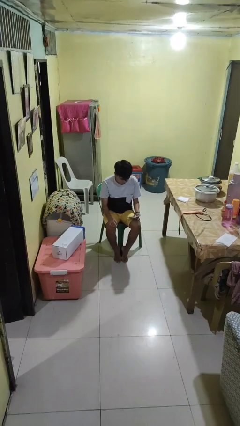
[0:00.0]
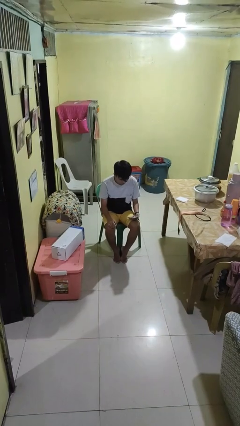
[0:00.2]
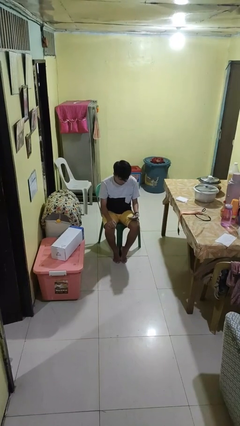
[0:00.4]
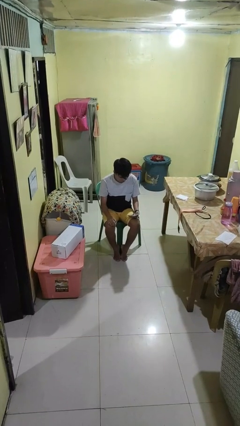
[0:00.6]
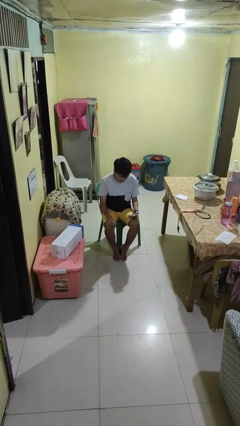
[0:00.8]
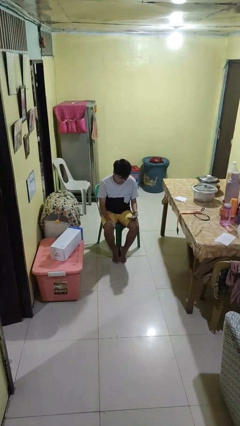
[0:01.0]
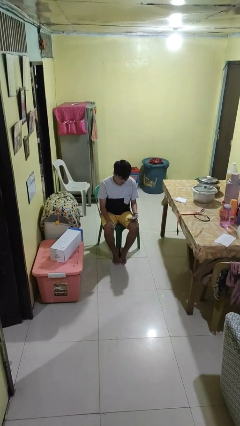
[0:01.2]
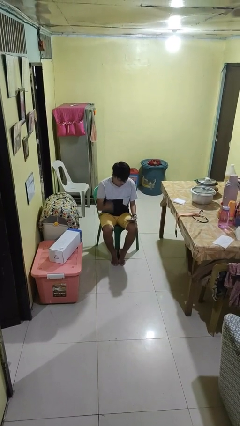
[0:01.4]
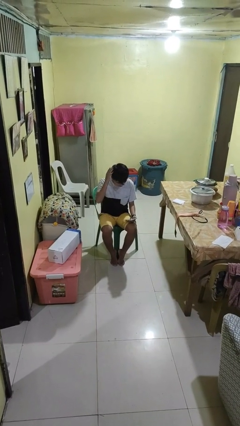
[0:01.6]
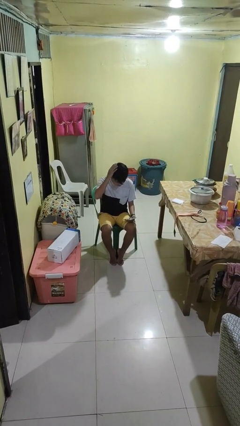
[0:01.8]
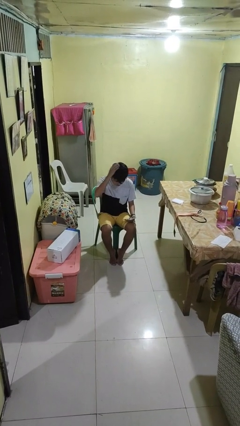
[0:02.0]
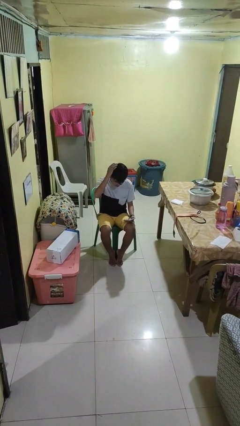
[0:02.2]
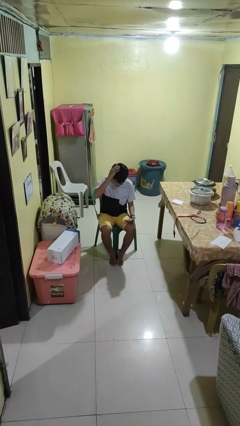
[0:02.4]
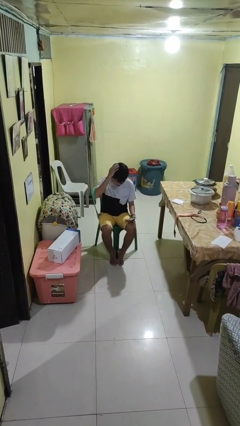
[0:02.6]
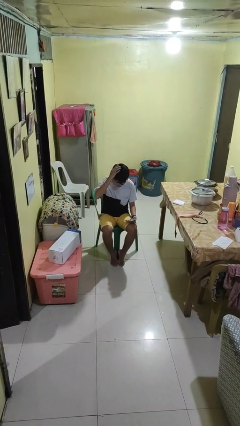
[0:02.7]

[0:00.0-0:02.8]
person pats head

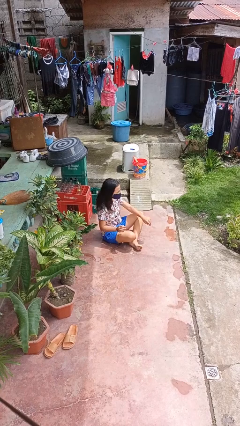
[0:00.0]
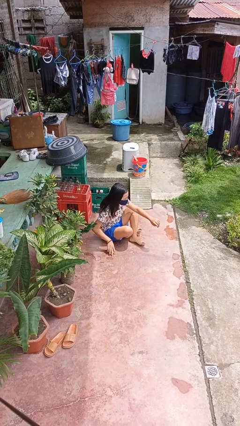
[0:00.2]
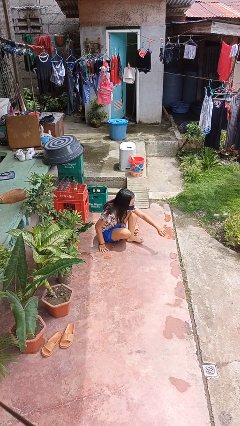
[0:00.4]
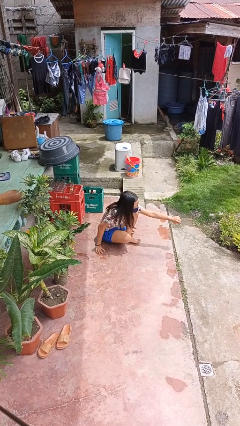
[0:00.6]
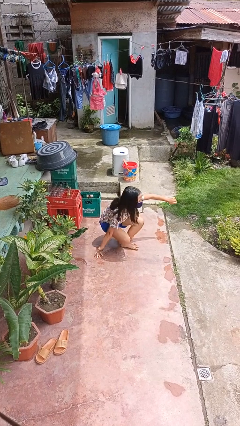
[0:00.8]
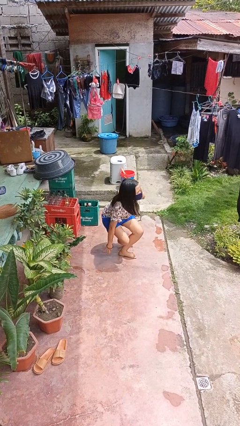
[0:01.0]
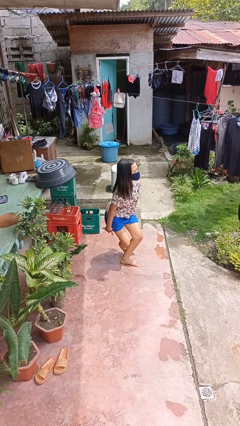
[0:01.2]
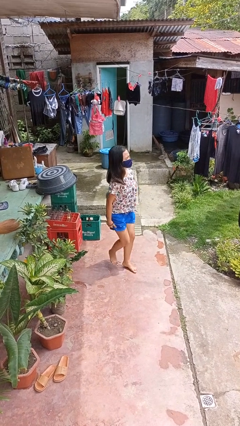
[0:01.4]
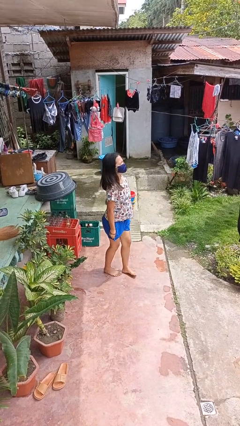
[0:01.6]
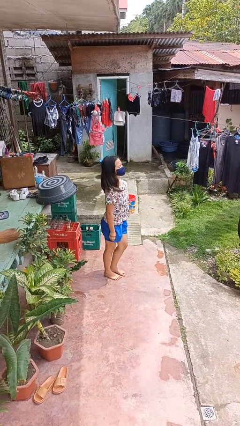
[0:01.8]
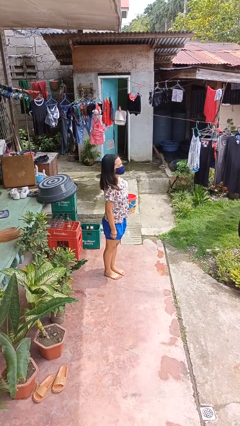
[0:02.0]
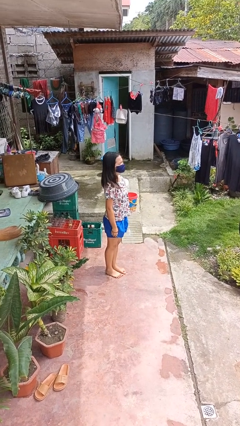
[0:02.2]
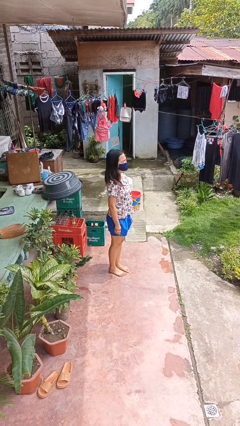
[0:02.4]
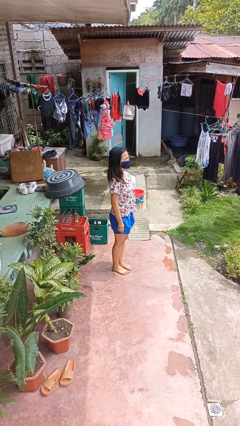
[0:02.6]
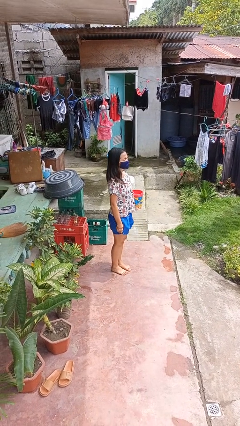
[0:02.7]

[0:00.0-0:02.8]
person stands up from floor

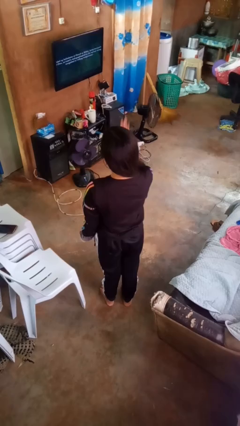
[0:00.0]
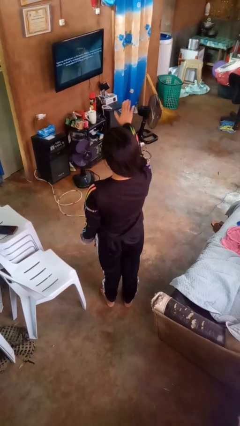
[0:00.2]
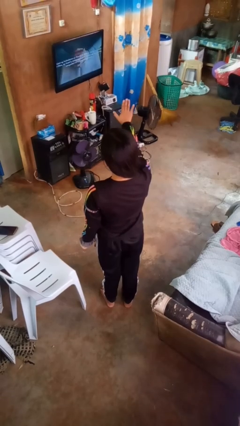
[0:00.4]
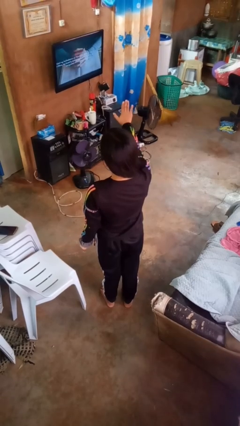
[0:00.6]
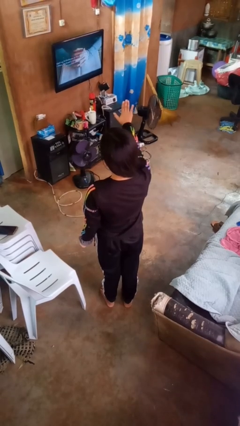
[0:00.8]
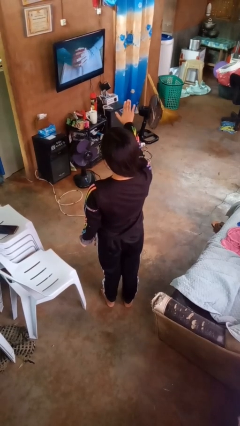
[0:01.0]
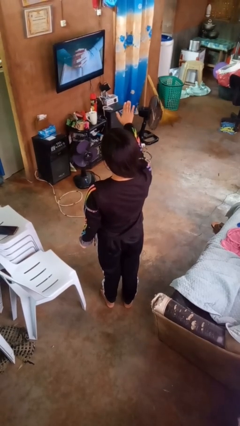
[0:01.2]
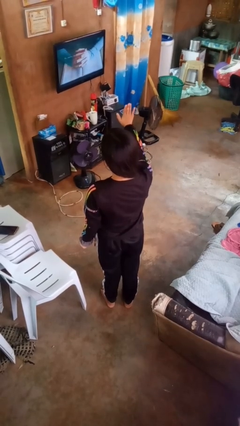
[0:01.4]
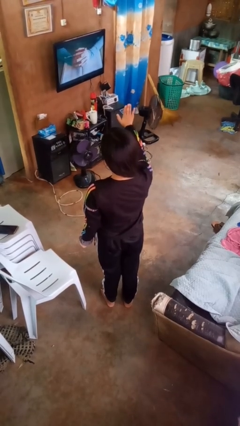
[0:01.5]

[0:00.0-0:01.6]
person gestures stop

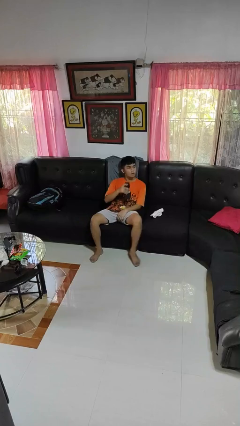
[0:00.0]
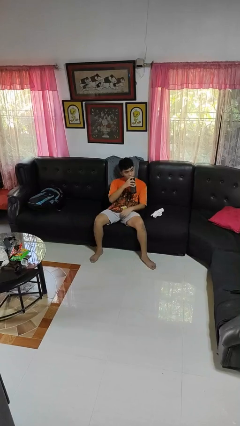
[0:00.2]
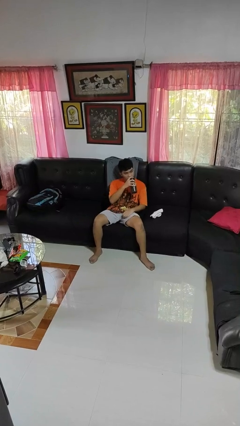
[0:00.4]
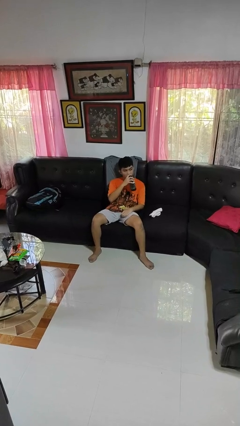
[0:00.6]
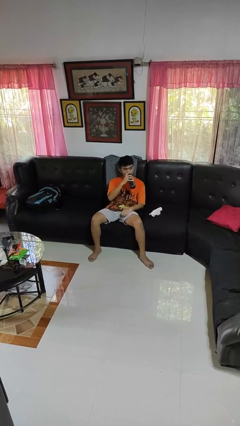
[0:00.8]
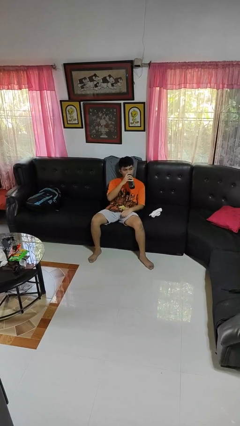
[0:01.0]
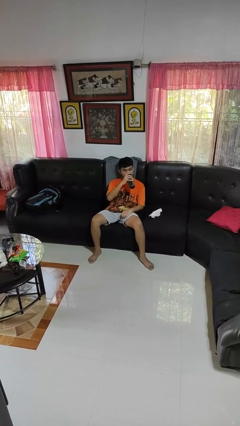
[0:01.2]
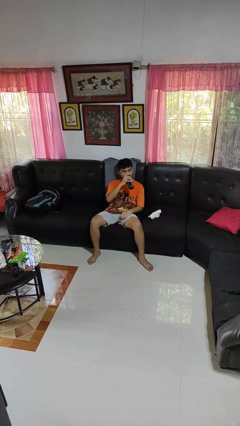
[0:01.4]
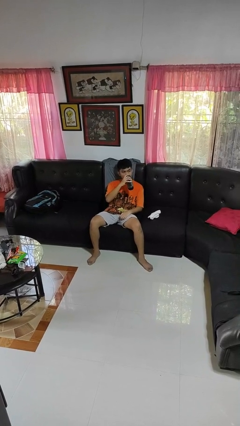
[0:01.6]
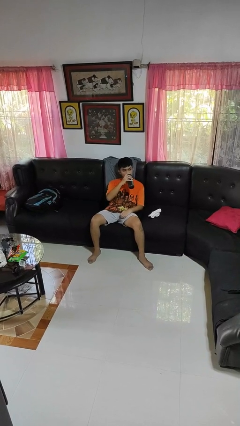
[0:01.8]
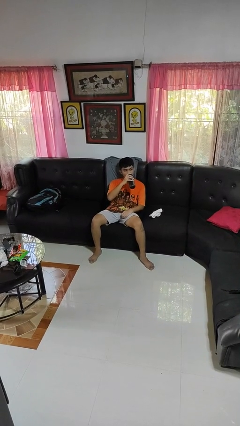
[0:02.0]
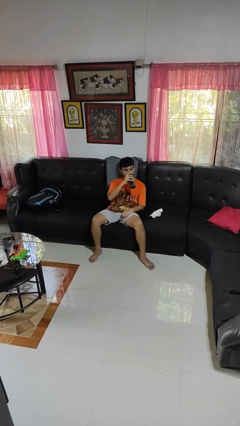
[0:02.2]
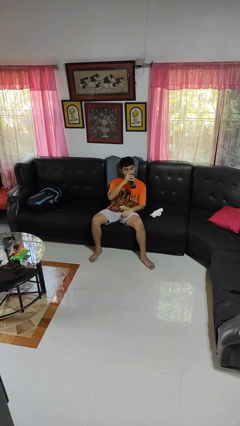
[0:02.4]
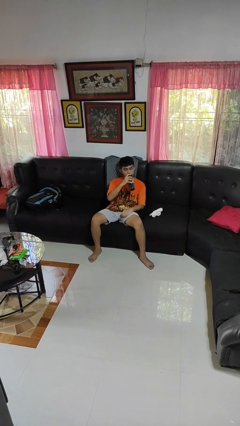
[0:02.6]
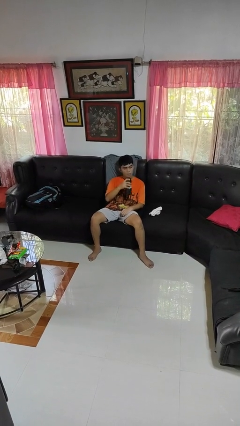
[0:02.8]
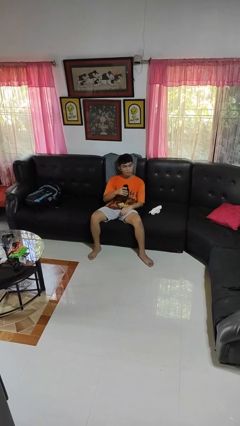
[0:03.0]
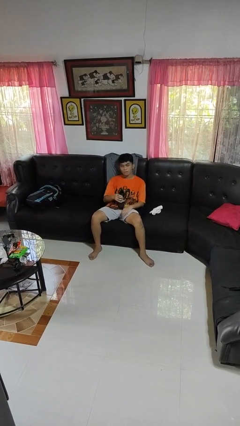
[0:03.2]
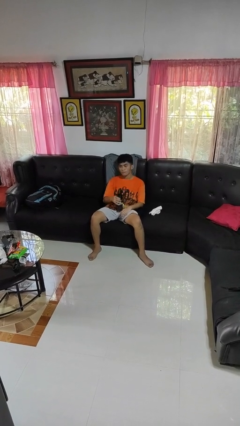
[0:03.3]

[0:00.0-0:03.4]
person drinks from bottle

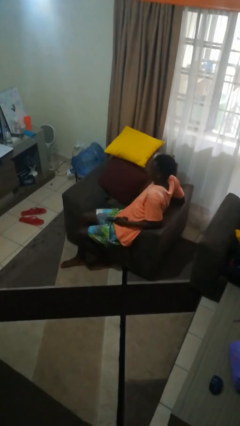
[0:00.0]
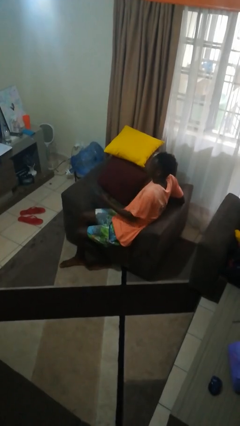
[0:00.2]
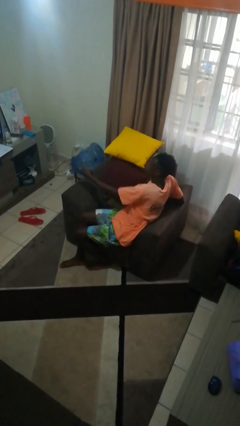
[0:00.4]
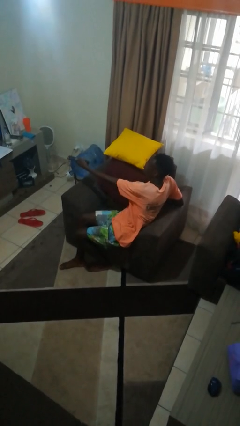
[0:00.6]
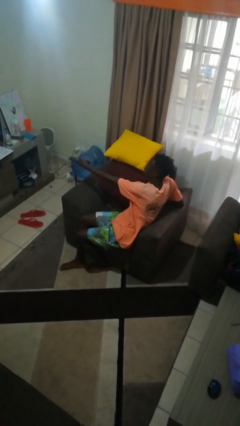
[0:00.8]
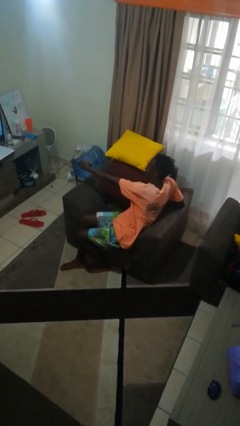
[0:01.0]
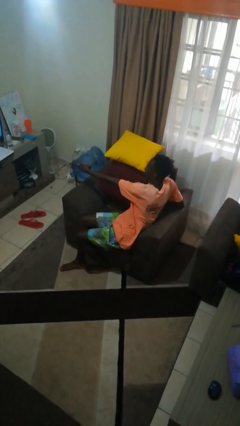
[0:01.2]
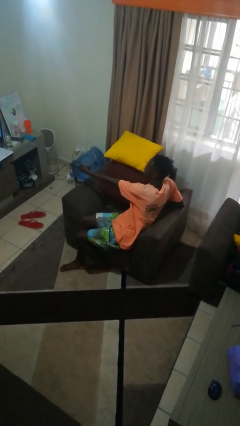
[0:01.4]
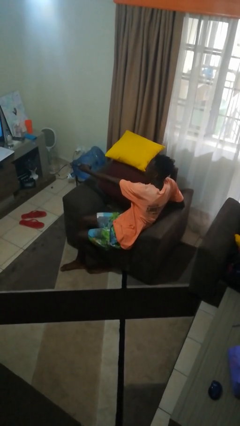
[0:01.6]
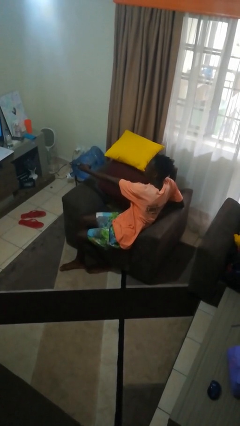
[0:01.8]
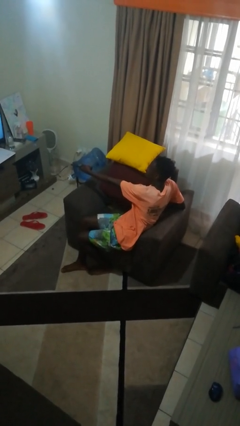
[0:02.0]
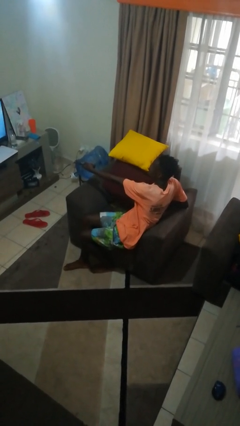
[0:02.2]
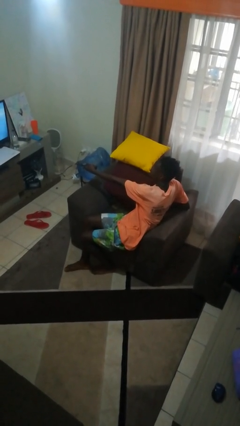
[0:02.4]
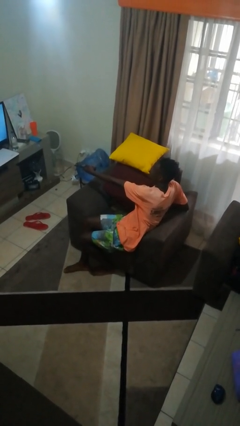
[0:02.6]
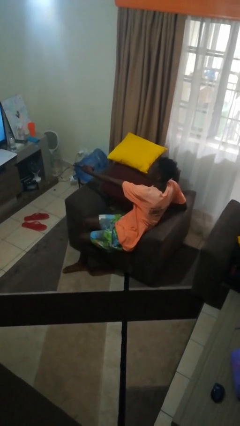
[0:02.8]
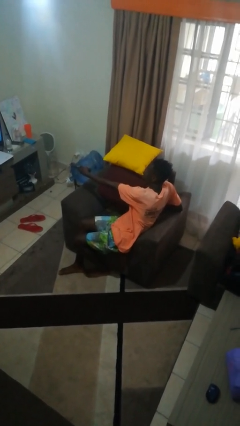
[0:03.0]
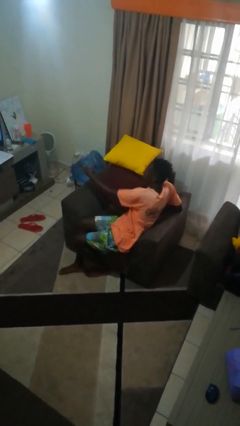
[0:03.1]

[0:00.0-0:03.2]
person uses television remote

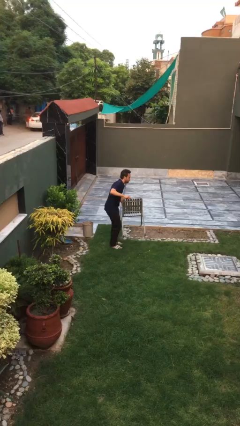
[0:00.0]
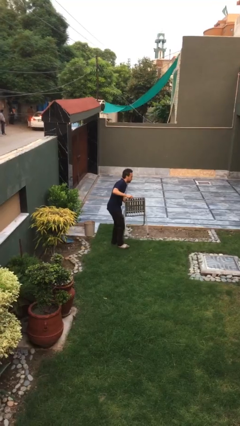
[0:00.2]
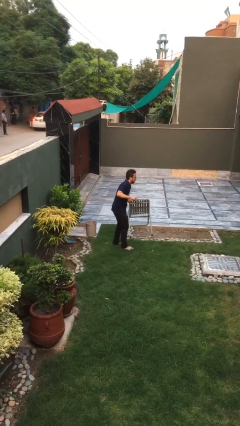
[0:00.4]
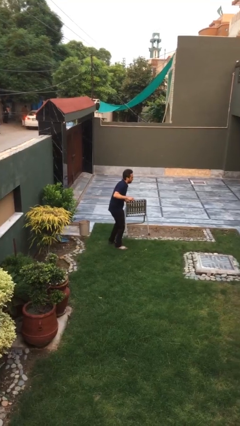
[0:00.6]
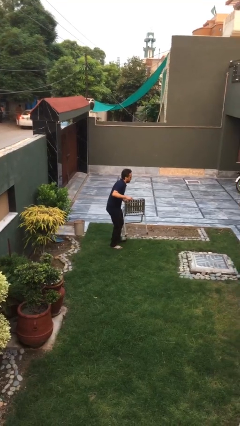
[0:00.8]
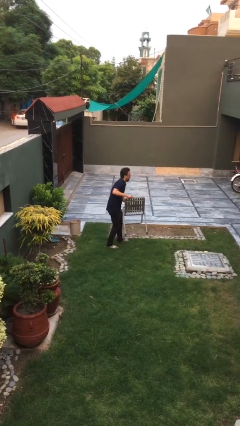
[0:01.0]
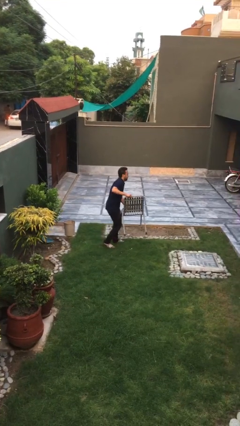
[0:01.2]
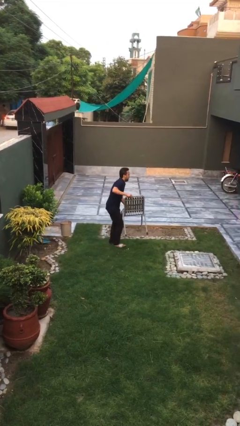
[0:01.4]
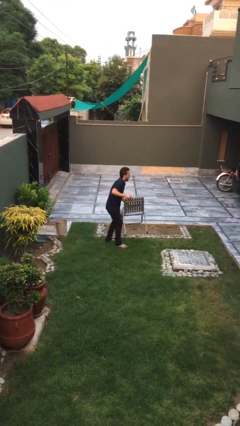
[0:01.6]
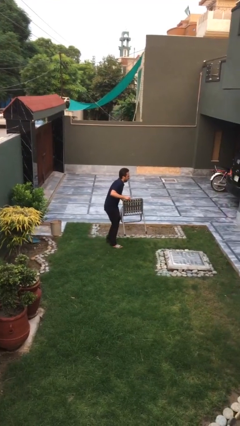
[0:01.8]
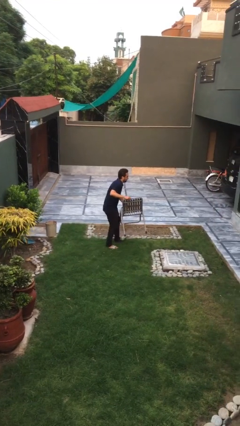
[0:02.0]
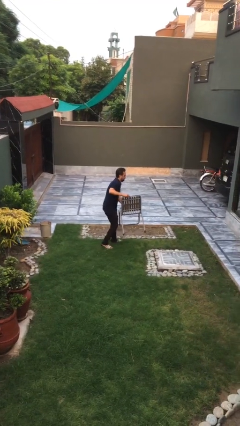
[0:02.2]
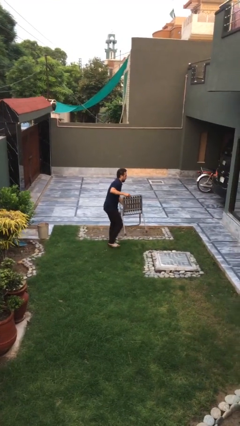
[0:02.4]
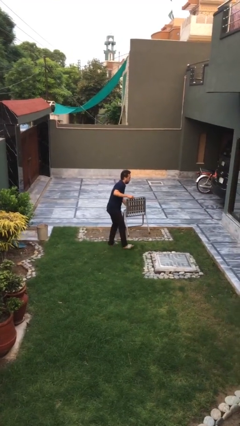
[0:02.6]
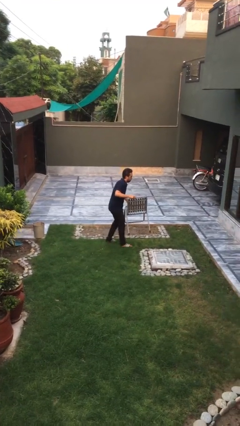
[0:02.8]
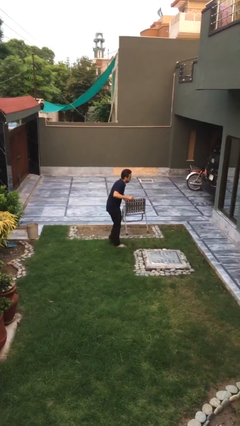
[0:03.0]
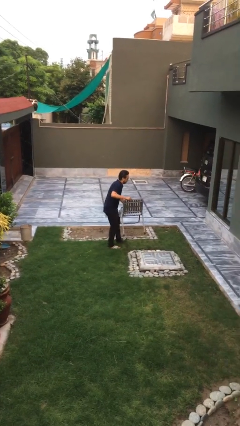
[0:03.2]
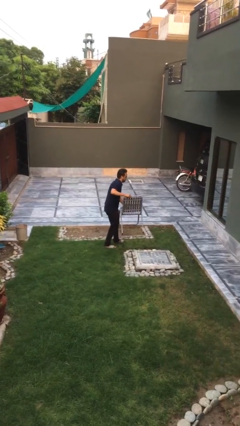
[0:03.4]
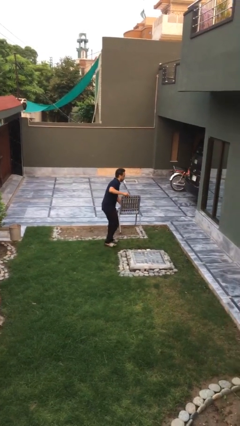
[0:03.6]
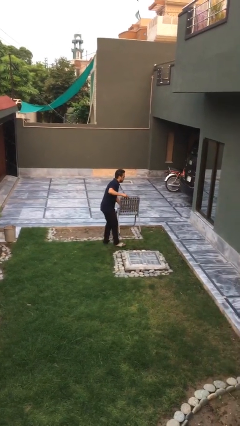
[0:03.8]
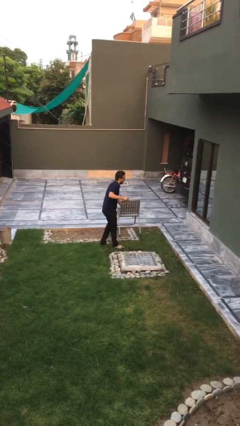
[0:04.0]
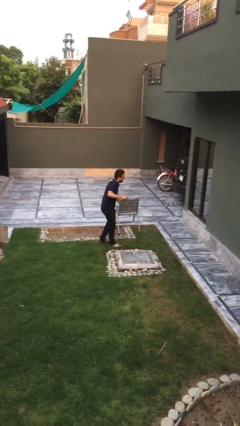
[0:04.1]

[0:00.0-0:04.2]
person carries heavy object
